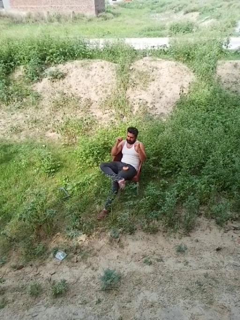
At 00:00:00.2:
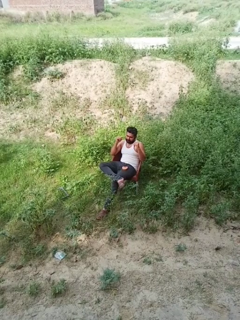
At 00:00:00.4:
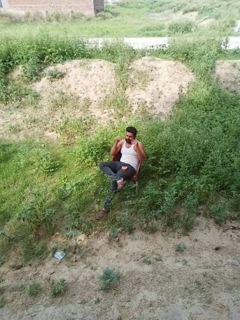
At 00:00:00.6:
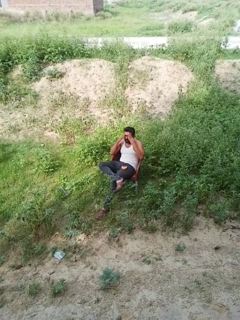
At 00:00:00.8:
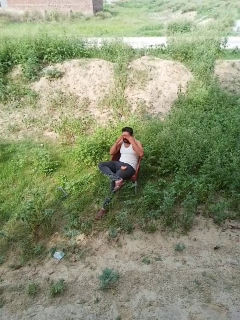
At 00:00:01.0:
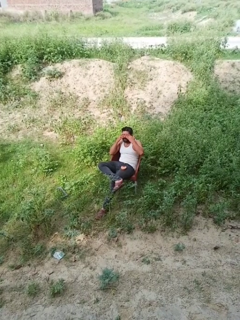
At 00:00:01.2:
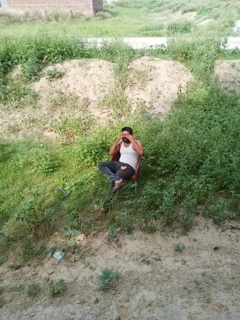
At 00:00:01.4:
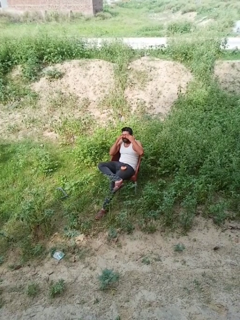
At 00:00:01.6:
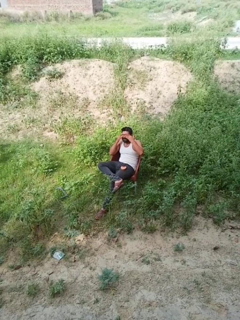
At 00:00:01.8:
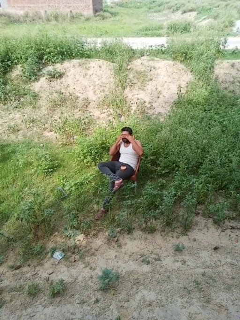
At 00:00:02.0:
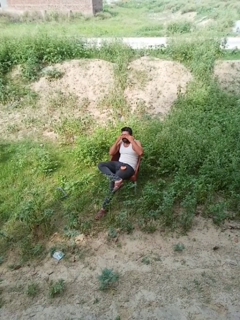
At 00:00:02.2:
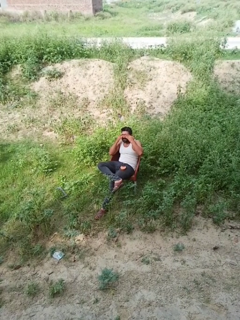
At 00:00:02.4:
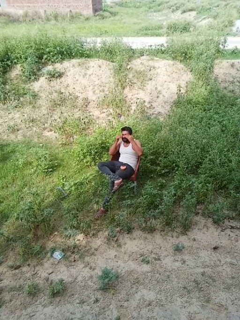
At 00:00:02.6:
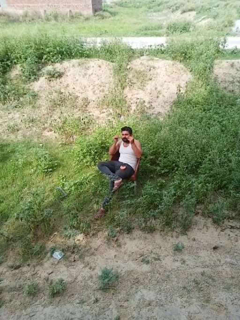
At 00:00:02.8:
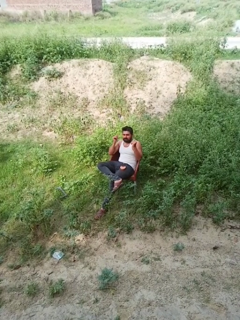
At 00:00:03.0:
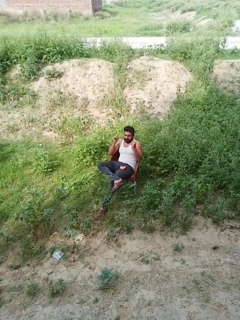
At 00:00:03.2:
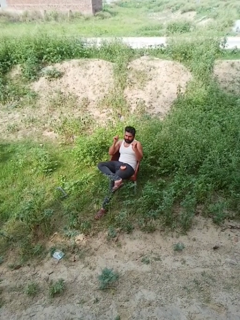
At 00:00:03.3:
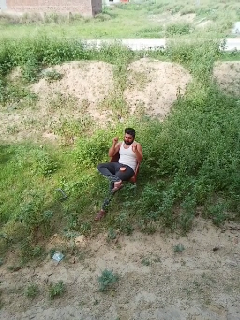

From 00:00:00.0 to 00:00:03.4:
person rubs eyes

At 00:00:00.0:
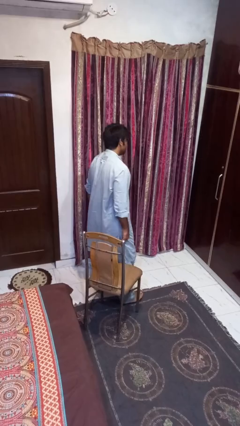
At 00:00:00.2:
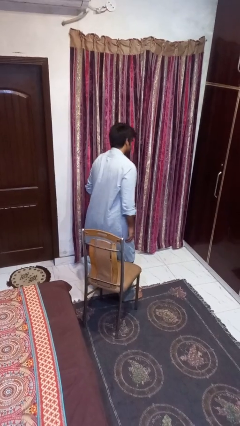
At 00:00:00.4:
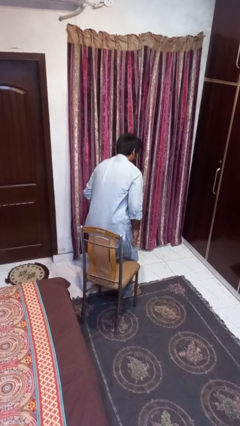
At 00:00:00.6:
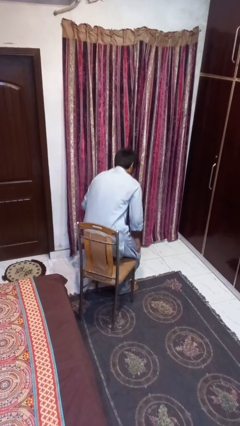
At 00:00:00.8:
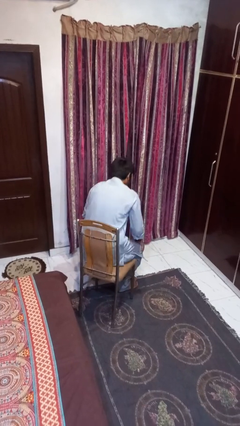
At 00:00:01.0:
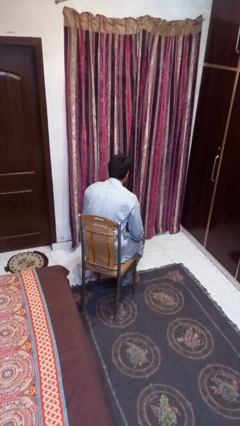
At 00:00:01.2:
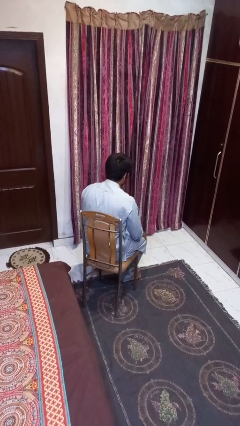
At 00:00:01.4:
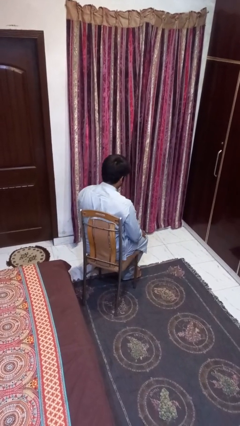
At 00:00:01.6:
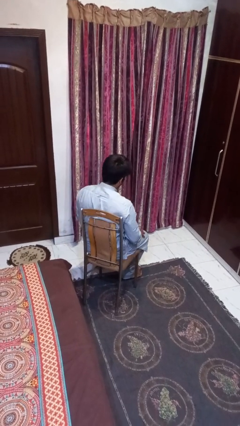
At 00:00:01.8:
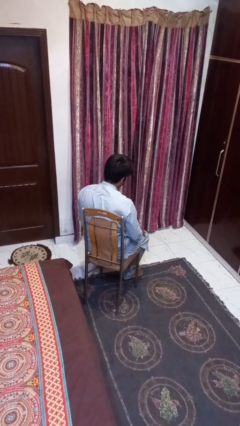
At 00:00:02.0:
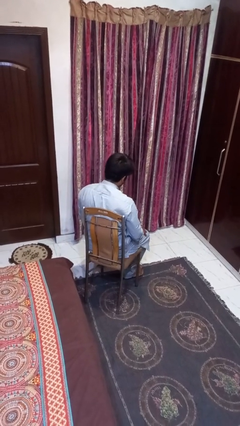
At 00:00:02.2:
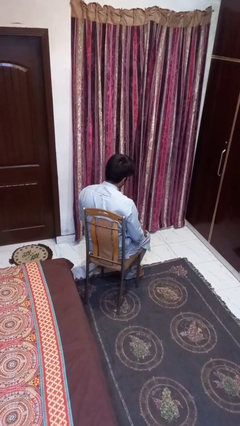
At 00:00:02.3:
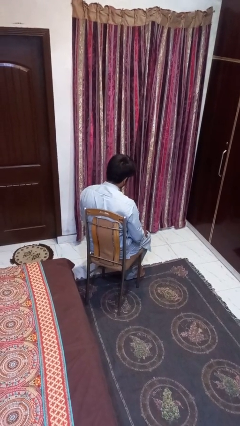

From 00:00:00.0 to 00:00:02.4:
person sits down

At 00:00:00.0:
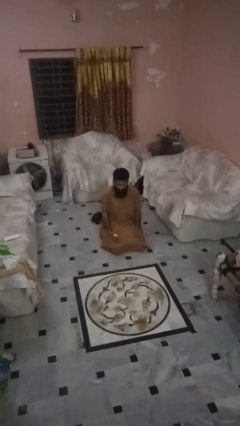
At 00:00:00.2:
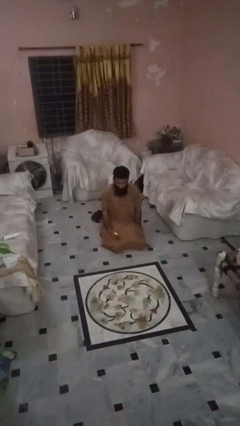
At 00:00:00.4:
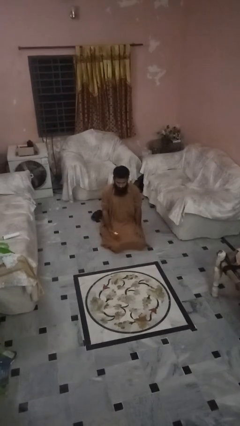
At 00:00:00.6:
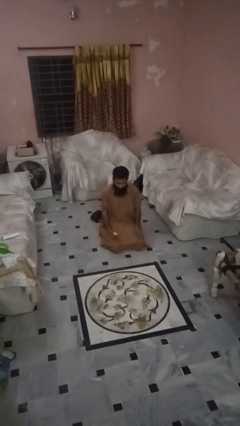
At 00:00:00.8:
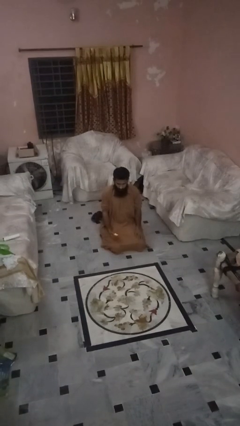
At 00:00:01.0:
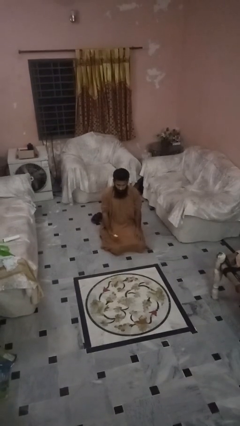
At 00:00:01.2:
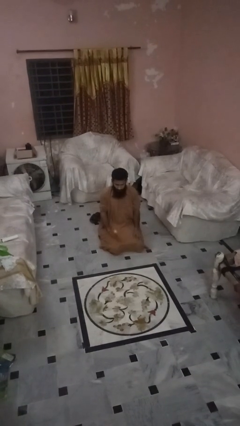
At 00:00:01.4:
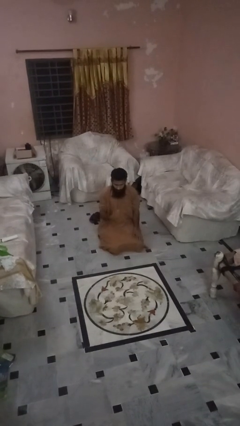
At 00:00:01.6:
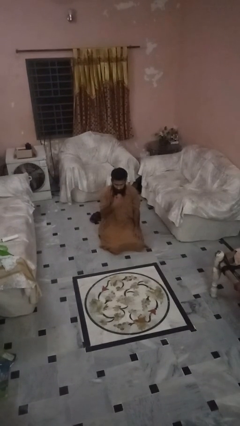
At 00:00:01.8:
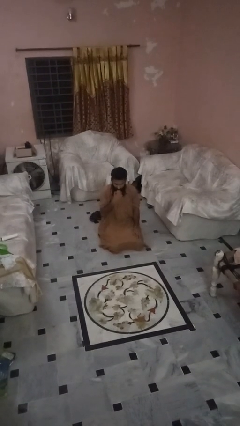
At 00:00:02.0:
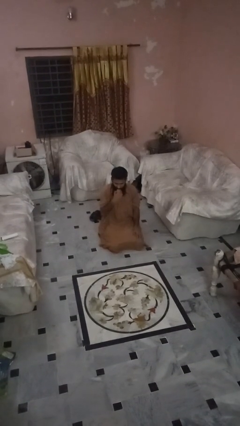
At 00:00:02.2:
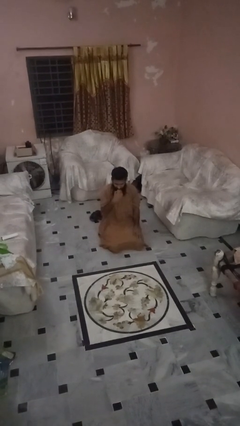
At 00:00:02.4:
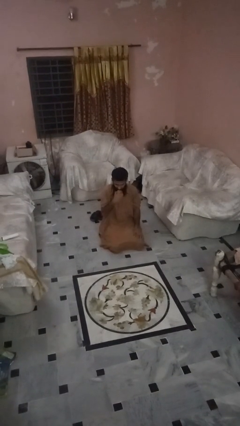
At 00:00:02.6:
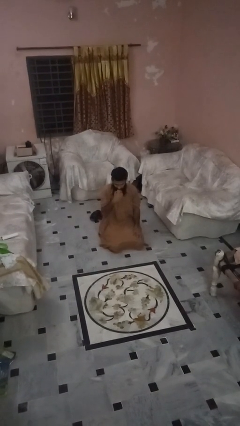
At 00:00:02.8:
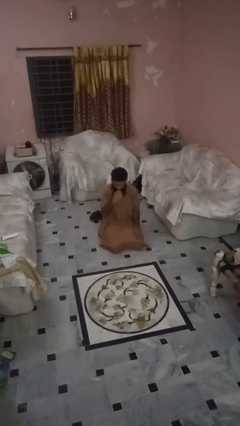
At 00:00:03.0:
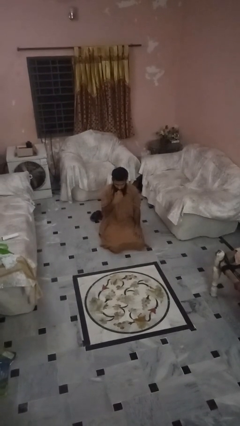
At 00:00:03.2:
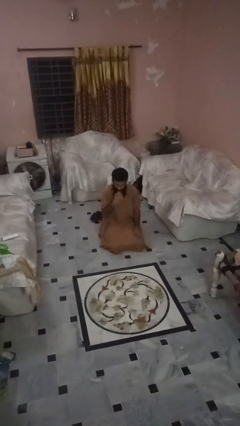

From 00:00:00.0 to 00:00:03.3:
person eats apple

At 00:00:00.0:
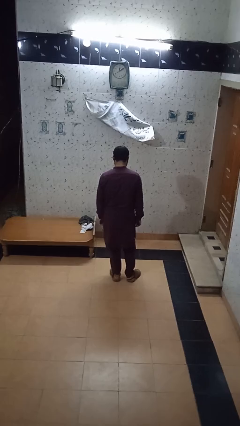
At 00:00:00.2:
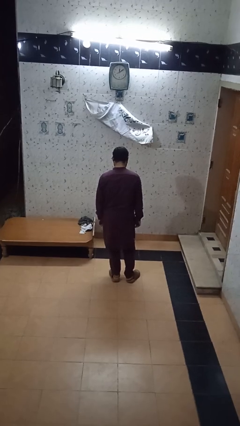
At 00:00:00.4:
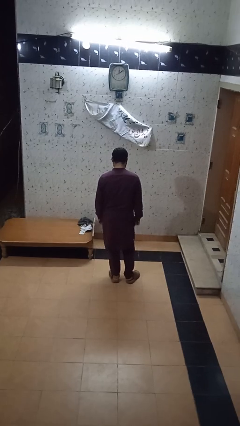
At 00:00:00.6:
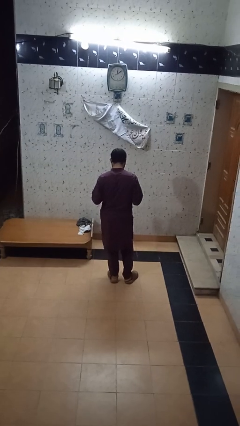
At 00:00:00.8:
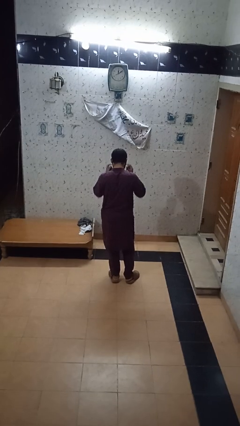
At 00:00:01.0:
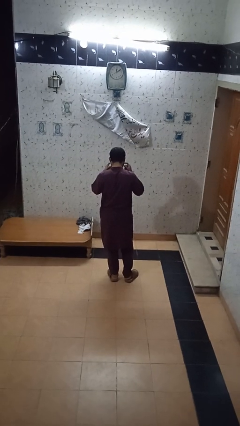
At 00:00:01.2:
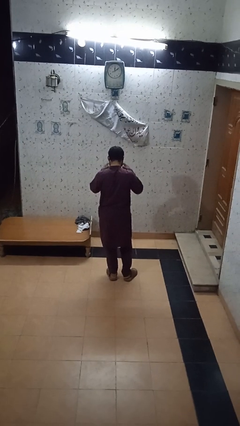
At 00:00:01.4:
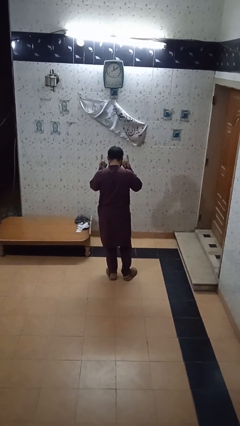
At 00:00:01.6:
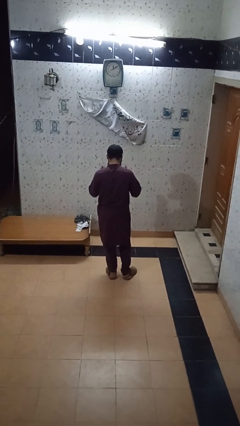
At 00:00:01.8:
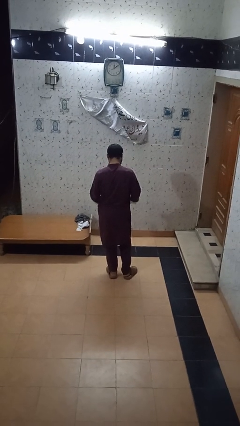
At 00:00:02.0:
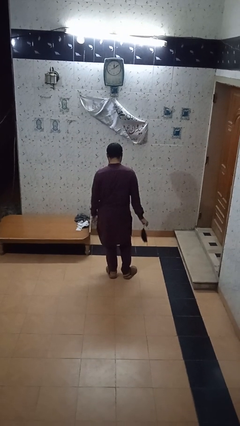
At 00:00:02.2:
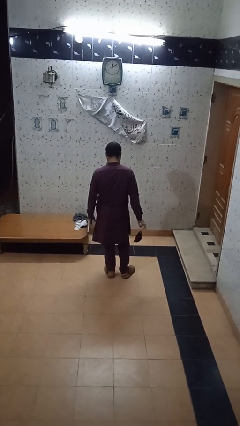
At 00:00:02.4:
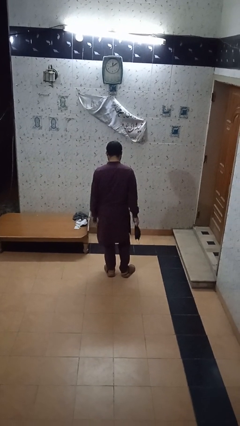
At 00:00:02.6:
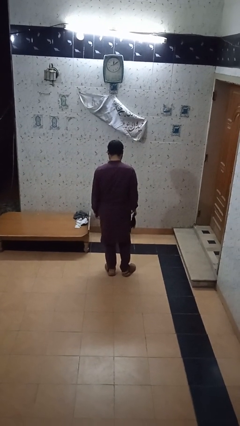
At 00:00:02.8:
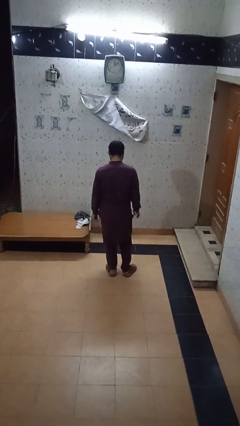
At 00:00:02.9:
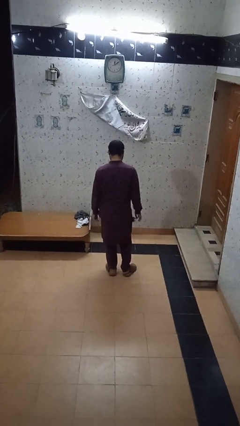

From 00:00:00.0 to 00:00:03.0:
person takes off facemask

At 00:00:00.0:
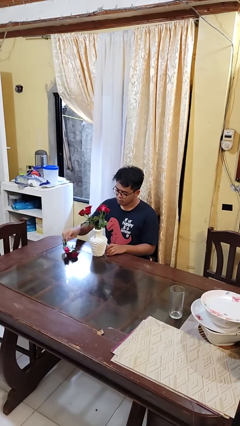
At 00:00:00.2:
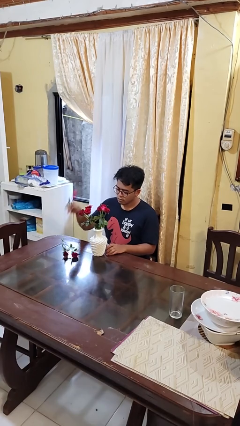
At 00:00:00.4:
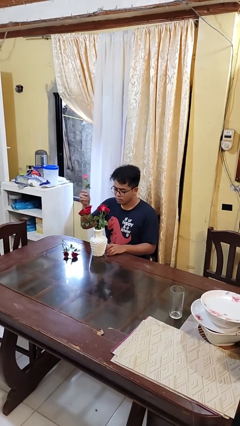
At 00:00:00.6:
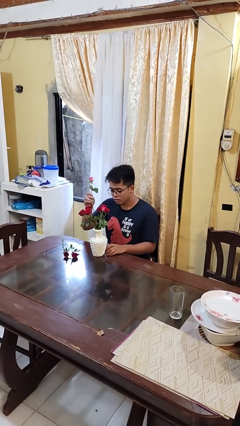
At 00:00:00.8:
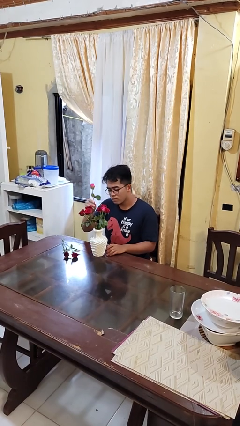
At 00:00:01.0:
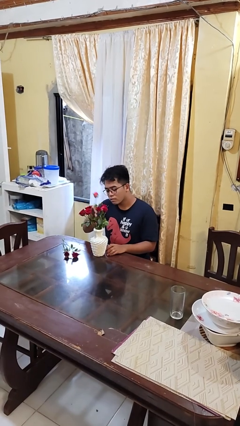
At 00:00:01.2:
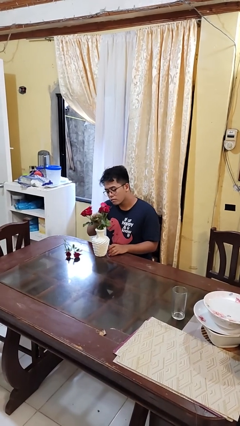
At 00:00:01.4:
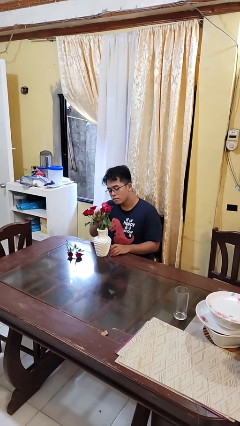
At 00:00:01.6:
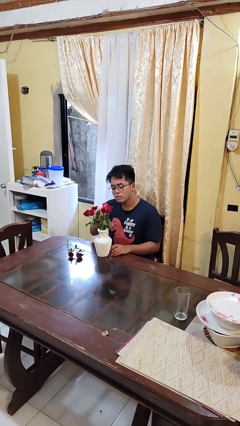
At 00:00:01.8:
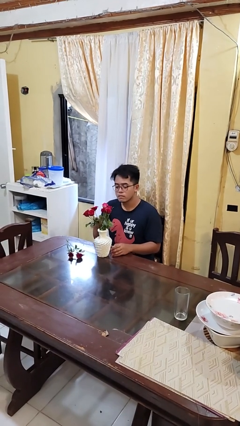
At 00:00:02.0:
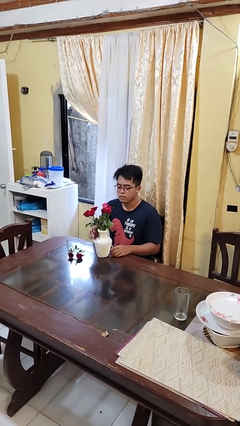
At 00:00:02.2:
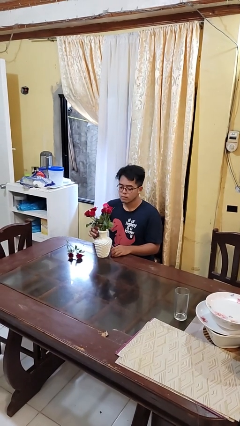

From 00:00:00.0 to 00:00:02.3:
person arranges flowers in vase

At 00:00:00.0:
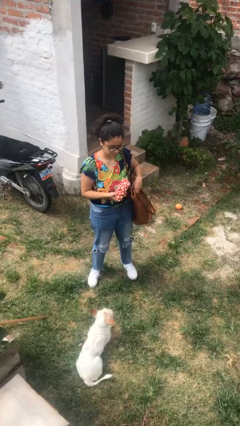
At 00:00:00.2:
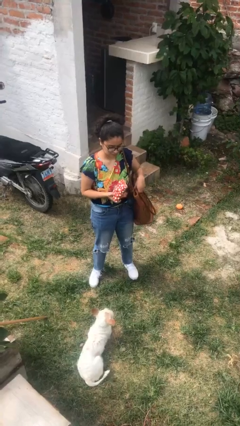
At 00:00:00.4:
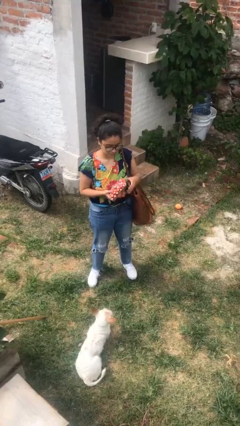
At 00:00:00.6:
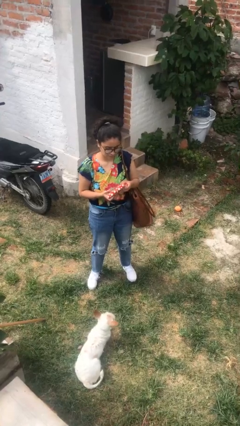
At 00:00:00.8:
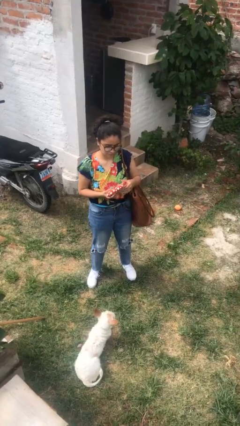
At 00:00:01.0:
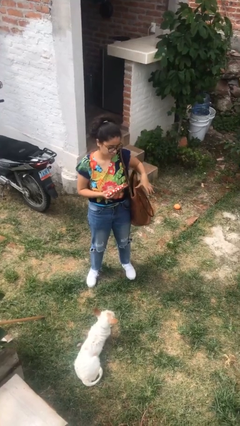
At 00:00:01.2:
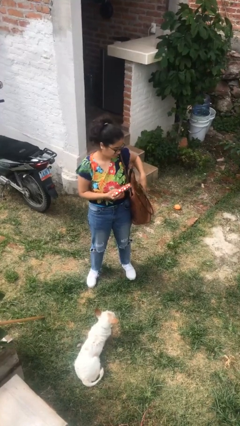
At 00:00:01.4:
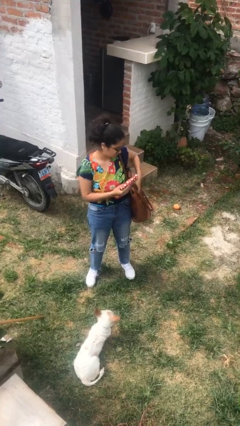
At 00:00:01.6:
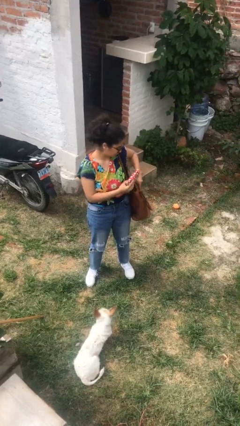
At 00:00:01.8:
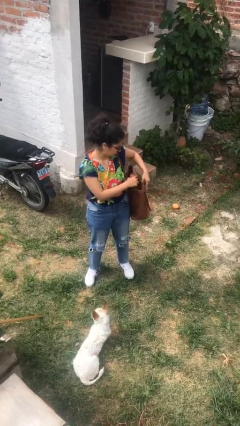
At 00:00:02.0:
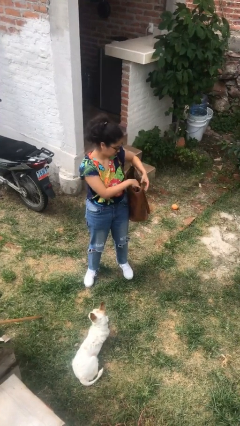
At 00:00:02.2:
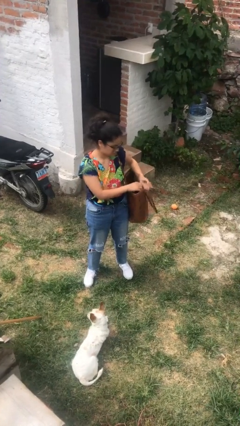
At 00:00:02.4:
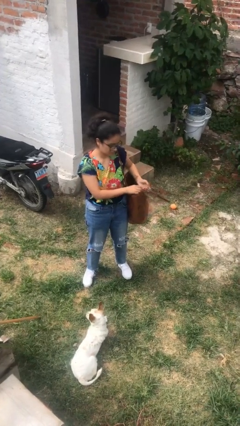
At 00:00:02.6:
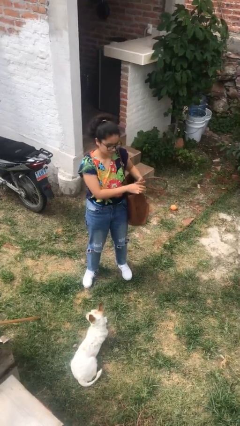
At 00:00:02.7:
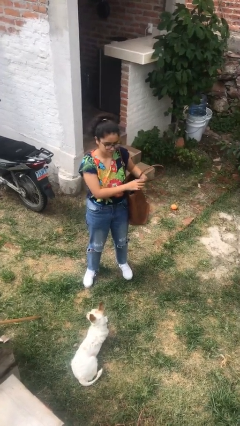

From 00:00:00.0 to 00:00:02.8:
person puts object into purse

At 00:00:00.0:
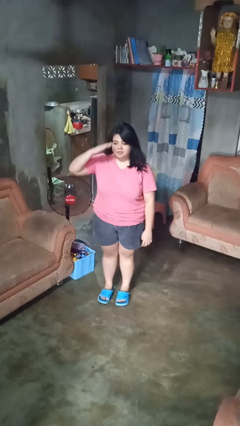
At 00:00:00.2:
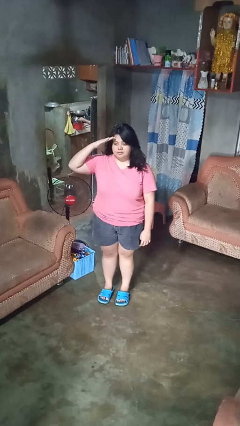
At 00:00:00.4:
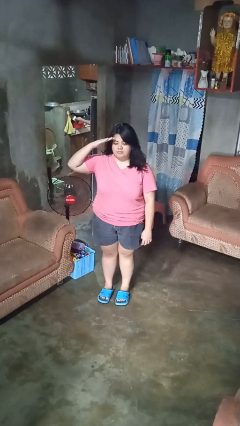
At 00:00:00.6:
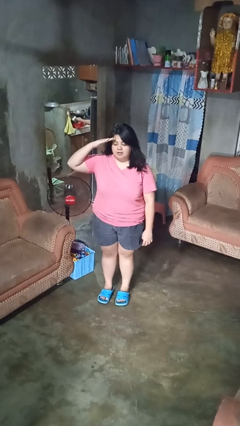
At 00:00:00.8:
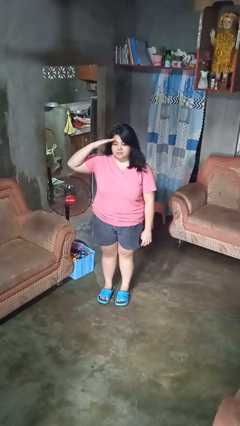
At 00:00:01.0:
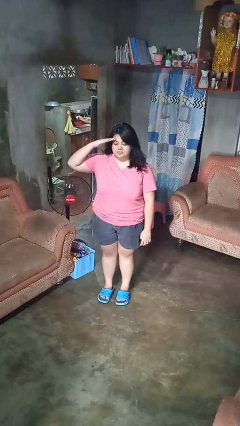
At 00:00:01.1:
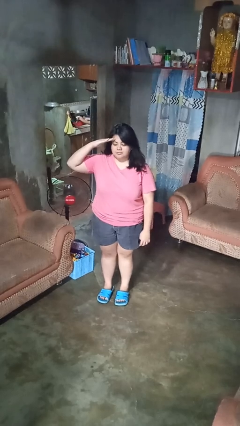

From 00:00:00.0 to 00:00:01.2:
person salutes
